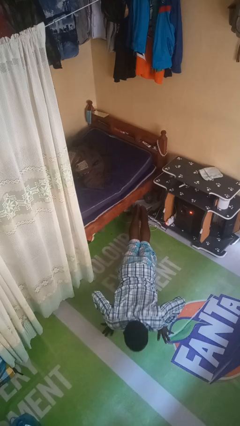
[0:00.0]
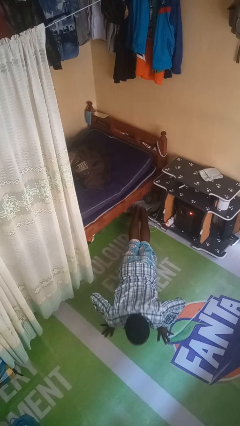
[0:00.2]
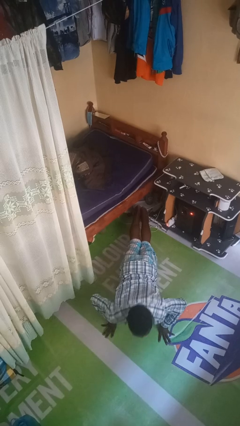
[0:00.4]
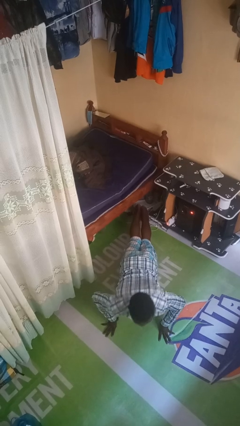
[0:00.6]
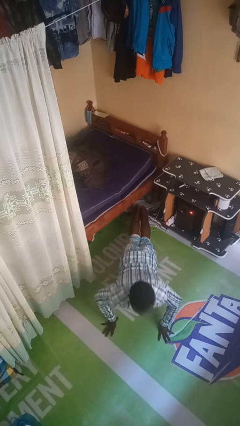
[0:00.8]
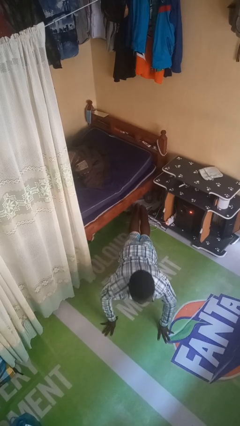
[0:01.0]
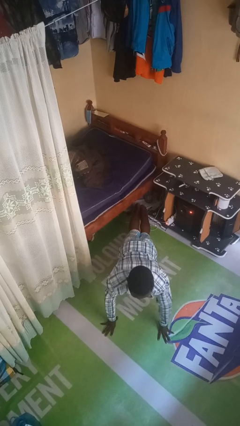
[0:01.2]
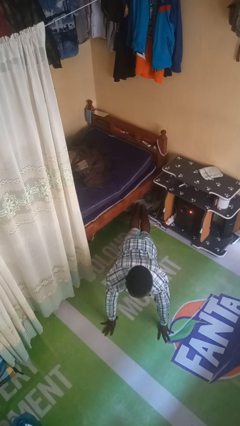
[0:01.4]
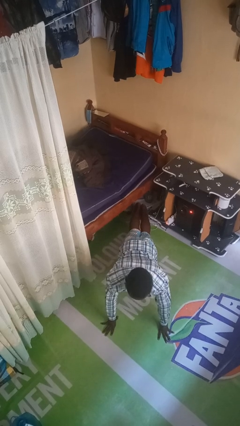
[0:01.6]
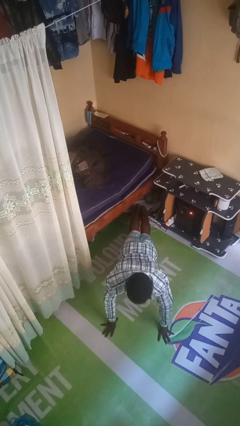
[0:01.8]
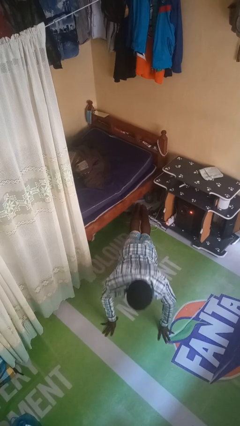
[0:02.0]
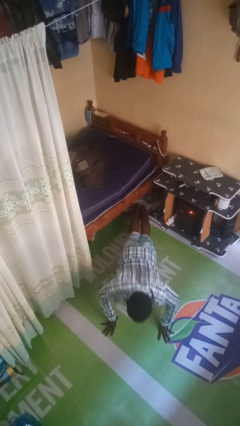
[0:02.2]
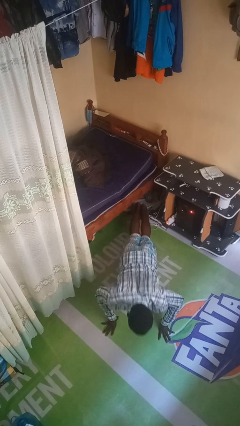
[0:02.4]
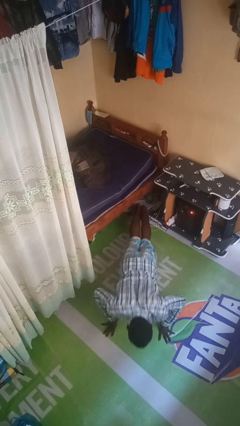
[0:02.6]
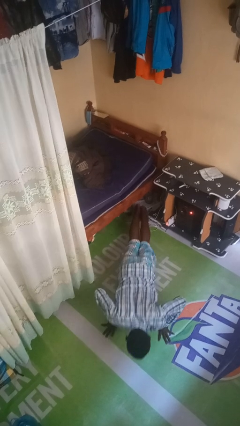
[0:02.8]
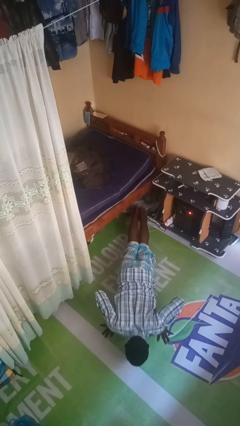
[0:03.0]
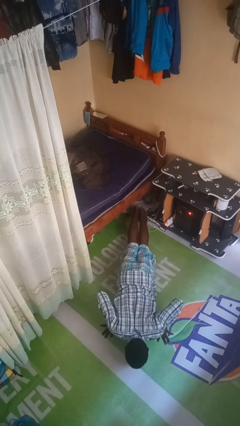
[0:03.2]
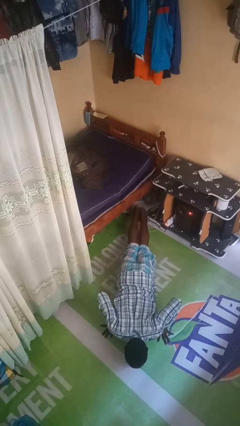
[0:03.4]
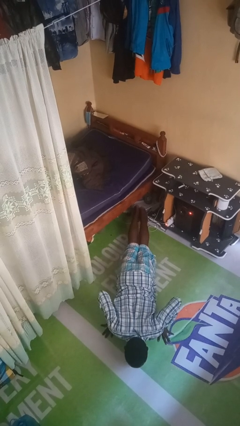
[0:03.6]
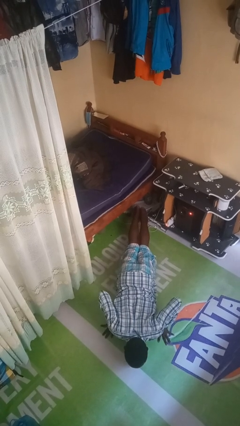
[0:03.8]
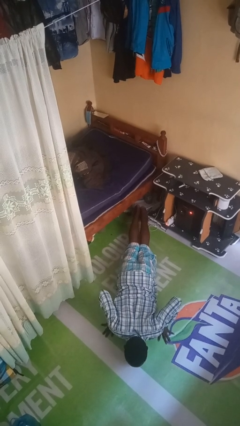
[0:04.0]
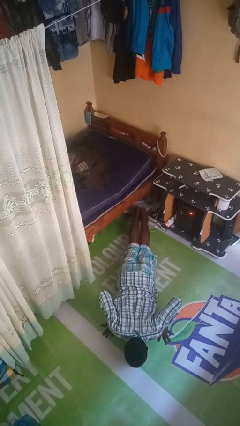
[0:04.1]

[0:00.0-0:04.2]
person exercises with pushup

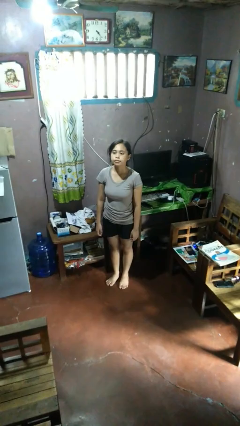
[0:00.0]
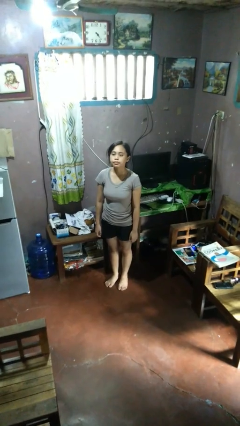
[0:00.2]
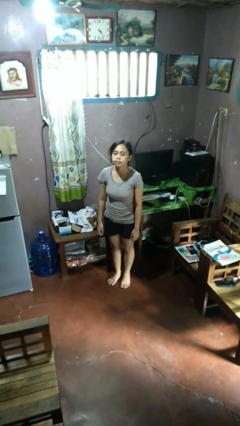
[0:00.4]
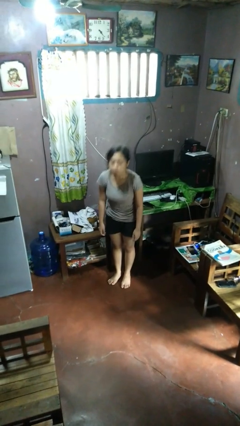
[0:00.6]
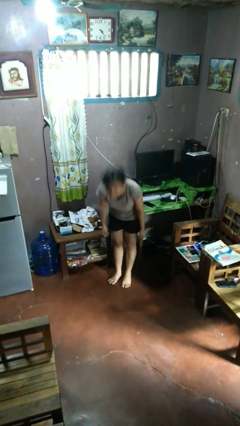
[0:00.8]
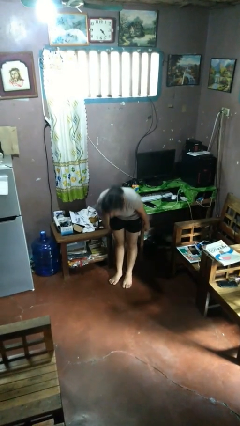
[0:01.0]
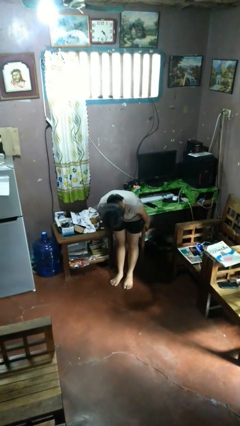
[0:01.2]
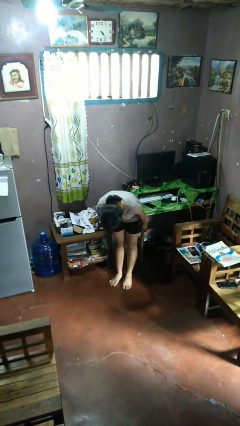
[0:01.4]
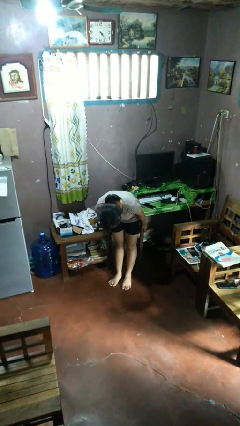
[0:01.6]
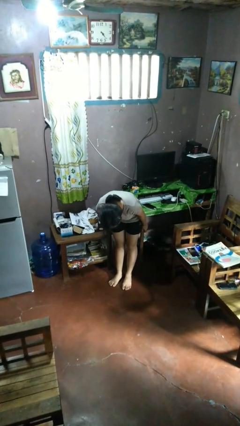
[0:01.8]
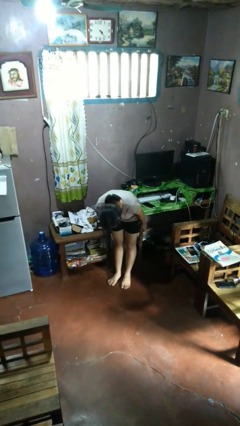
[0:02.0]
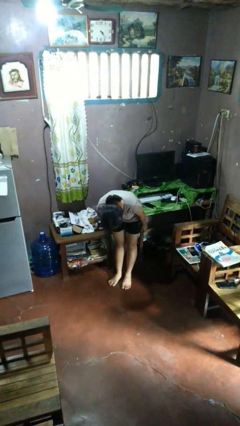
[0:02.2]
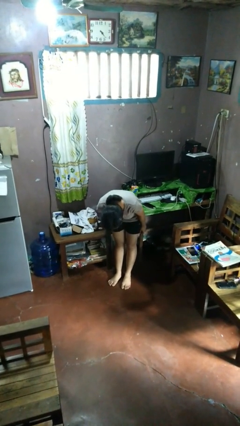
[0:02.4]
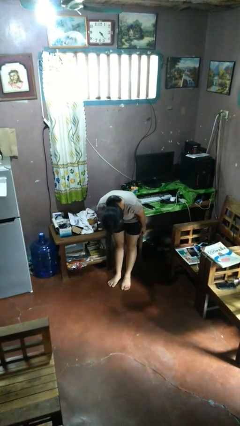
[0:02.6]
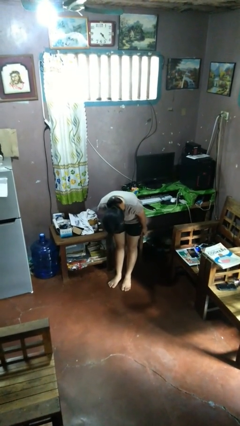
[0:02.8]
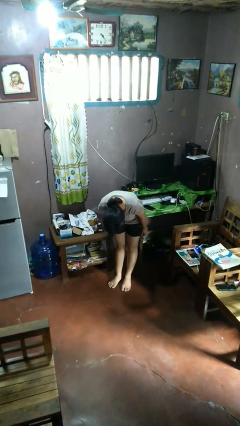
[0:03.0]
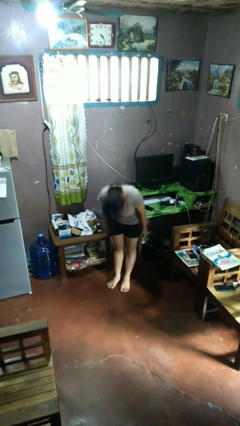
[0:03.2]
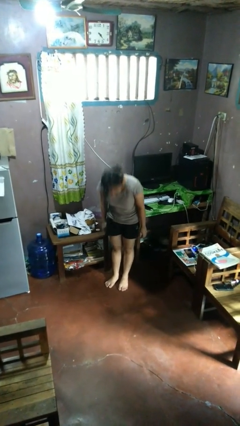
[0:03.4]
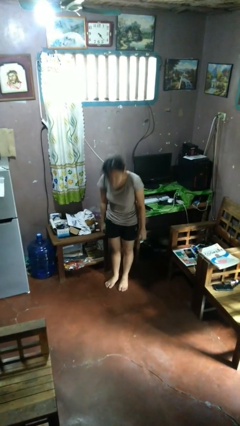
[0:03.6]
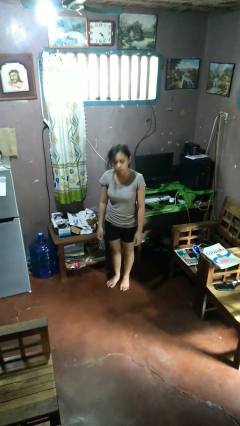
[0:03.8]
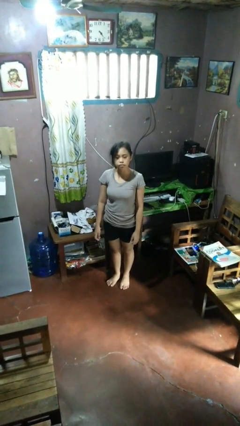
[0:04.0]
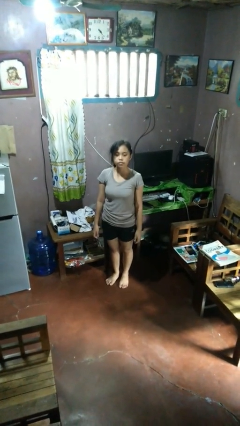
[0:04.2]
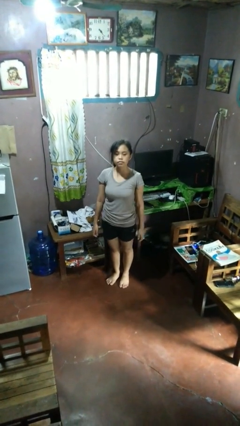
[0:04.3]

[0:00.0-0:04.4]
person bows

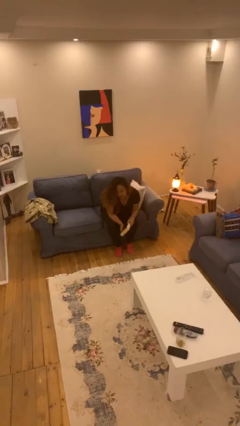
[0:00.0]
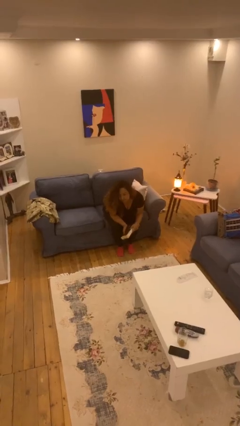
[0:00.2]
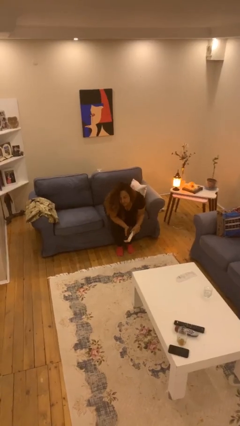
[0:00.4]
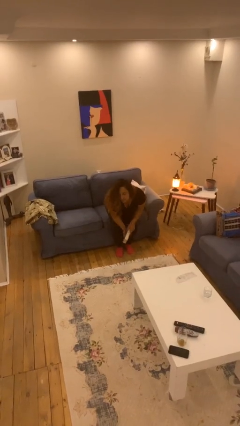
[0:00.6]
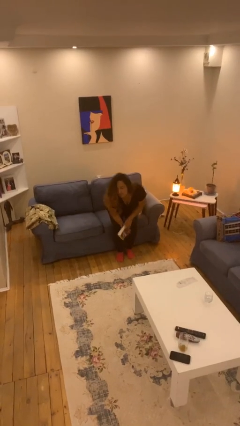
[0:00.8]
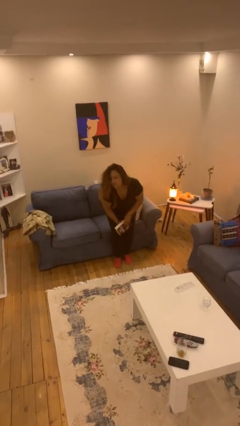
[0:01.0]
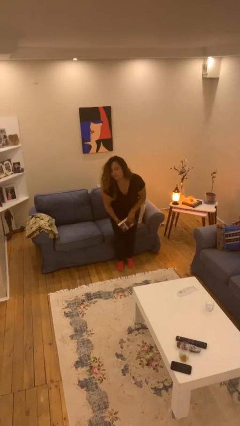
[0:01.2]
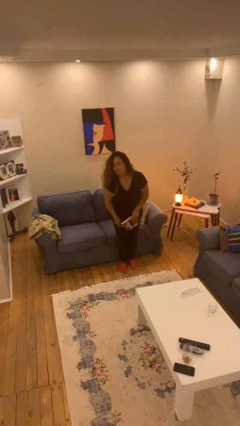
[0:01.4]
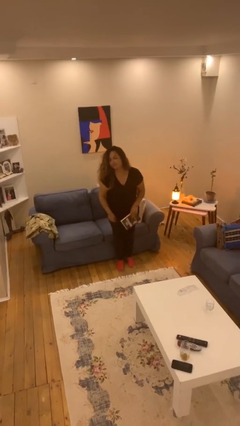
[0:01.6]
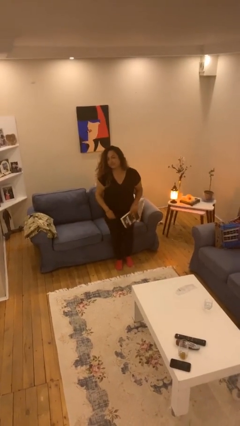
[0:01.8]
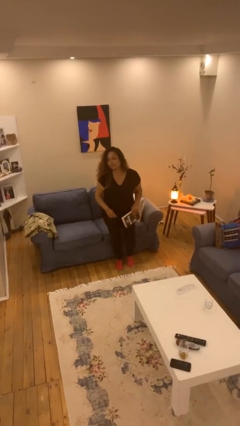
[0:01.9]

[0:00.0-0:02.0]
person stands up

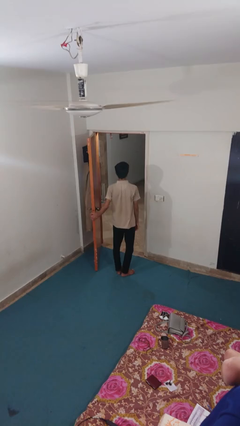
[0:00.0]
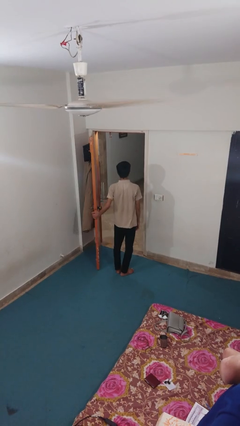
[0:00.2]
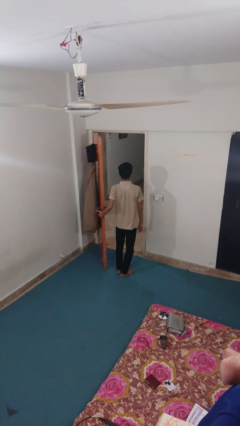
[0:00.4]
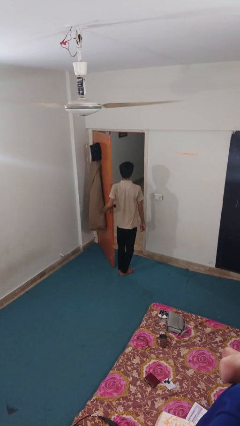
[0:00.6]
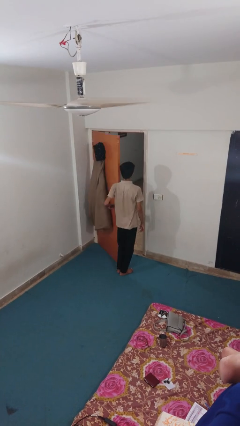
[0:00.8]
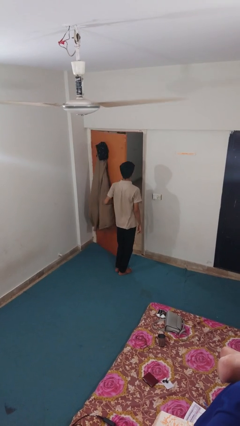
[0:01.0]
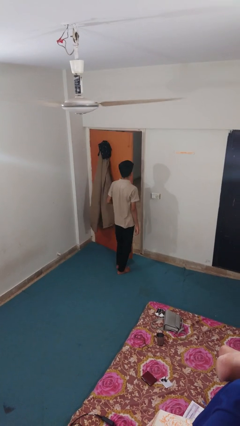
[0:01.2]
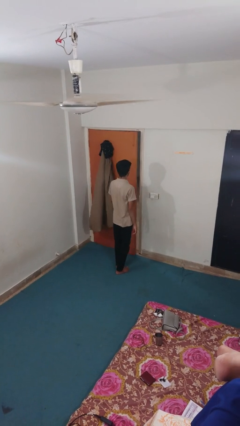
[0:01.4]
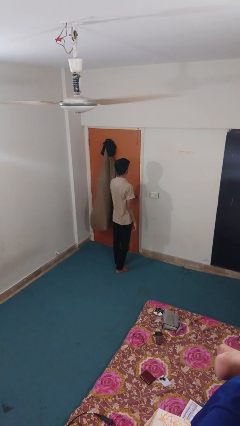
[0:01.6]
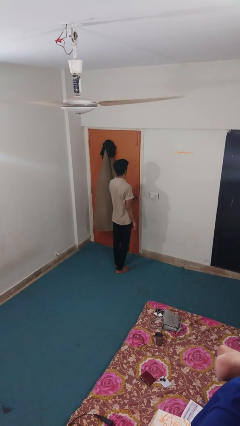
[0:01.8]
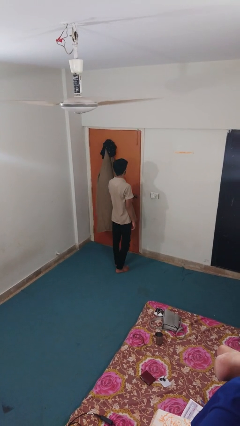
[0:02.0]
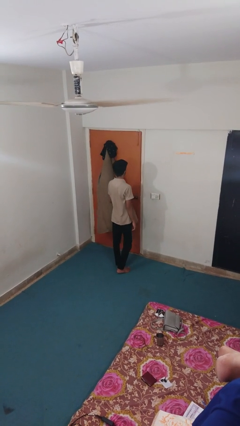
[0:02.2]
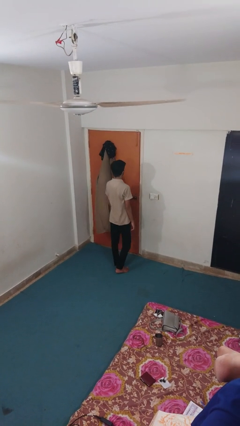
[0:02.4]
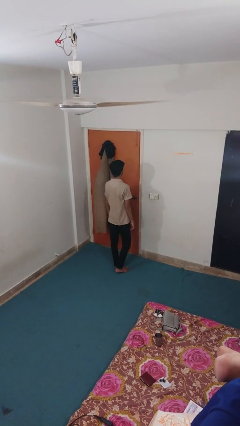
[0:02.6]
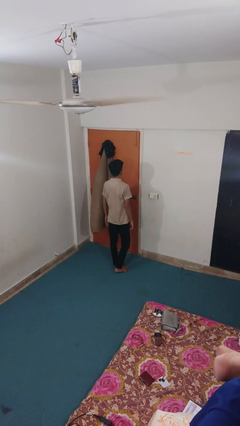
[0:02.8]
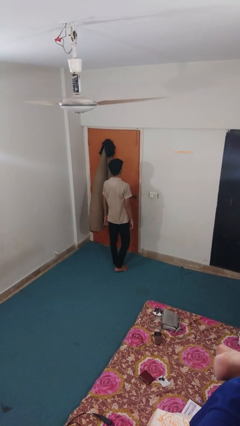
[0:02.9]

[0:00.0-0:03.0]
person closes facility door

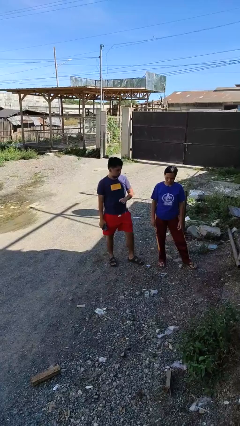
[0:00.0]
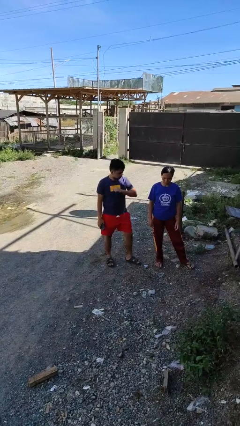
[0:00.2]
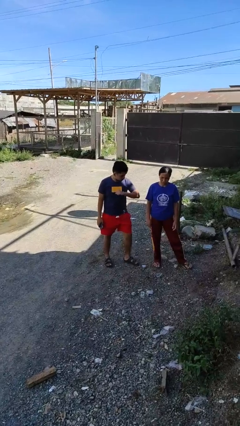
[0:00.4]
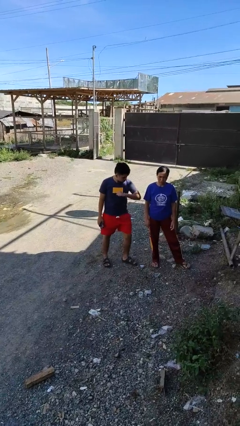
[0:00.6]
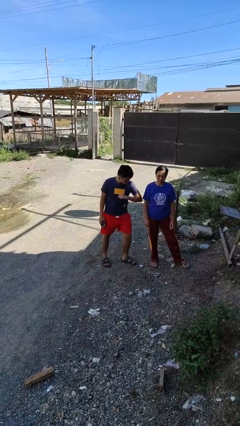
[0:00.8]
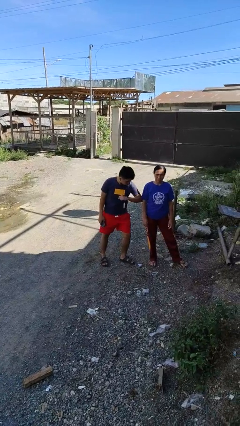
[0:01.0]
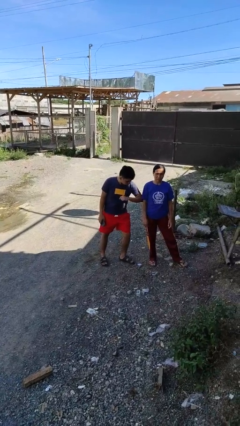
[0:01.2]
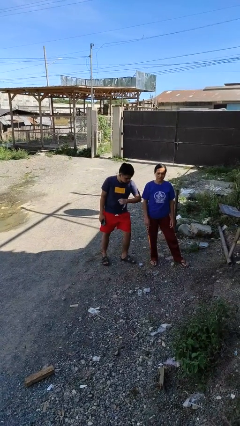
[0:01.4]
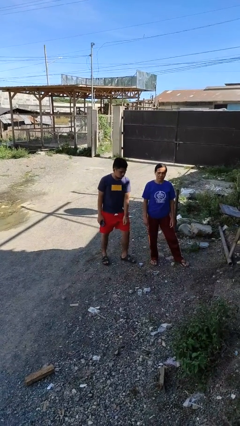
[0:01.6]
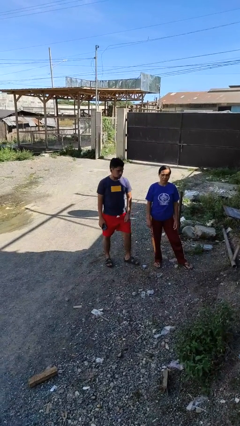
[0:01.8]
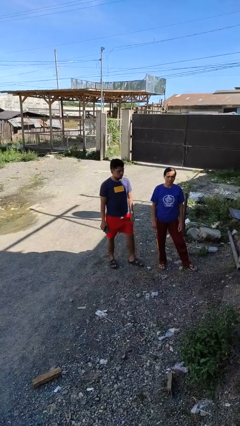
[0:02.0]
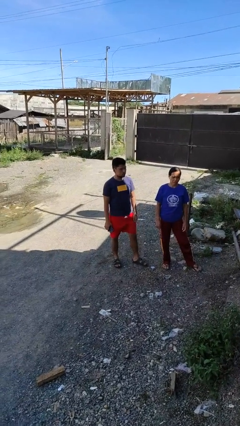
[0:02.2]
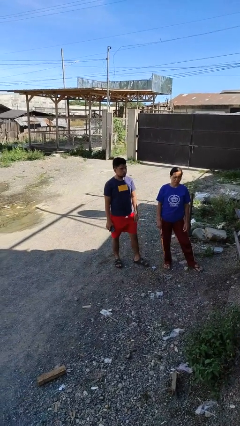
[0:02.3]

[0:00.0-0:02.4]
person nudges person with elbow

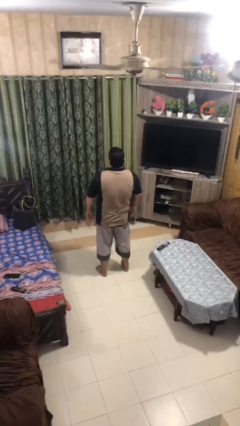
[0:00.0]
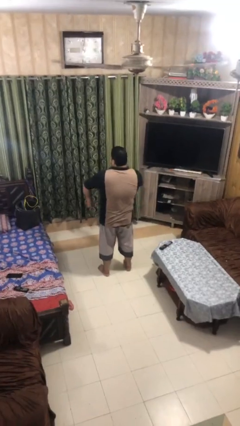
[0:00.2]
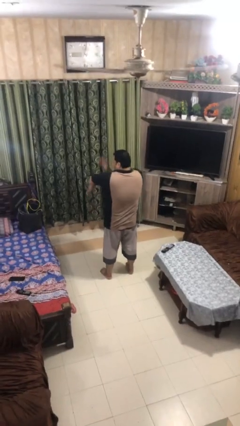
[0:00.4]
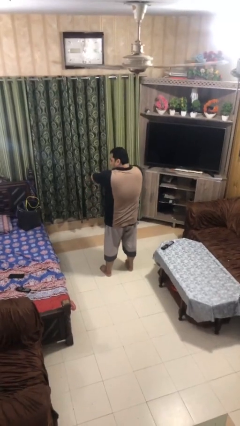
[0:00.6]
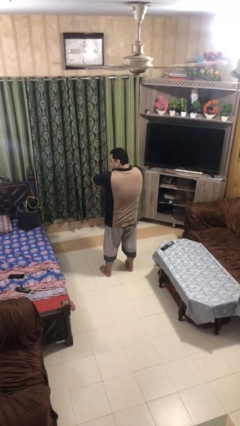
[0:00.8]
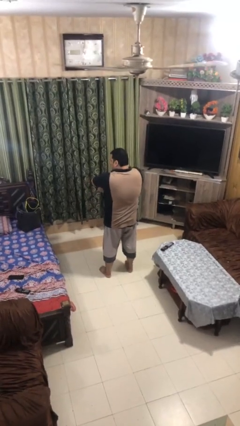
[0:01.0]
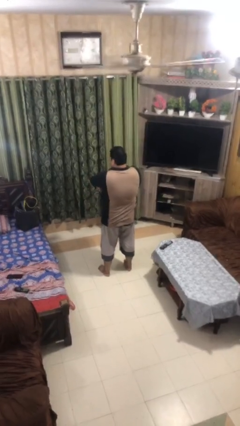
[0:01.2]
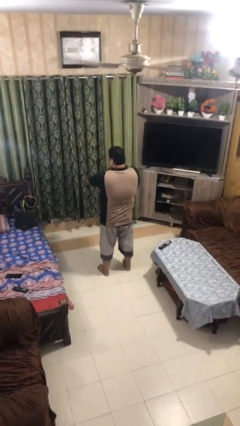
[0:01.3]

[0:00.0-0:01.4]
person swats bug

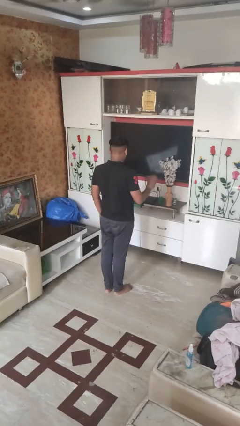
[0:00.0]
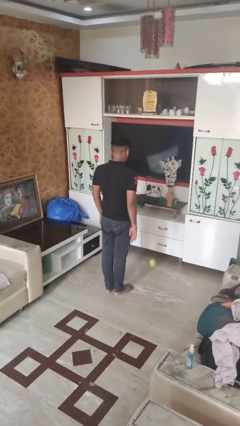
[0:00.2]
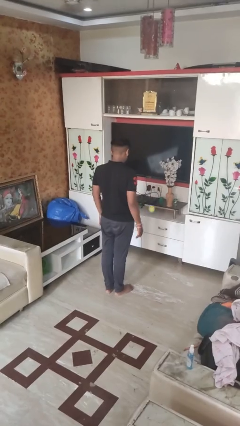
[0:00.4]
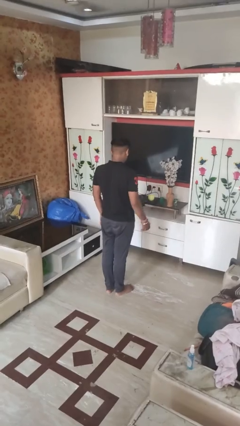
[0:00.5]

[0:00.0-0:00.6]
person bounces ball on floor
